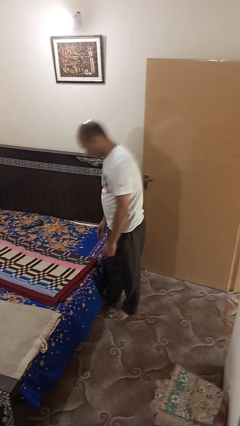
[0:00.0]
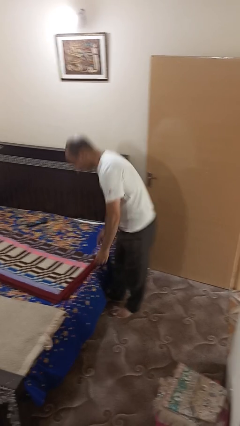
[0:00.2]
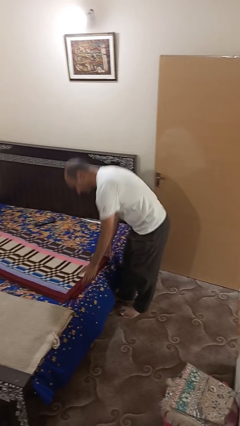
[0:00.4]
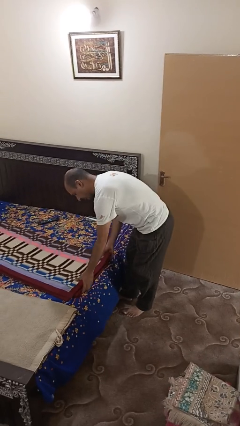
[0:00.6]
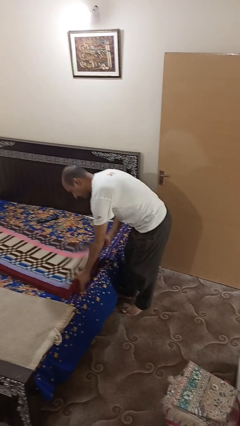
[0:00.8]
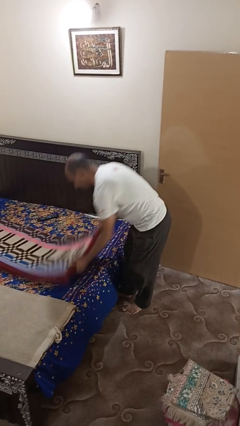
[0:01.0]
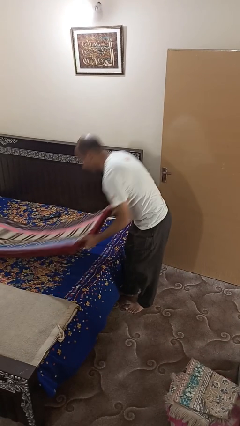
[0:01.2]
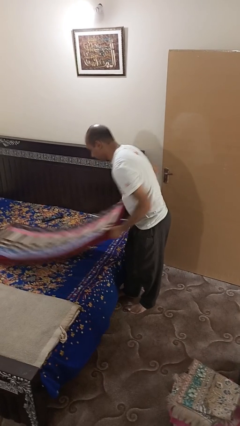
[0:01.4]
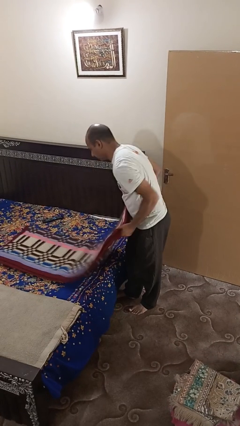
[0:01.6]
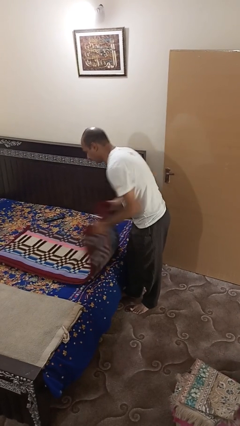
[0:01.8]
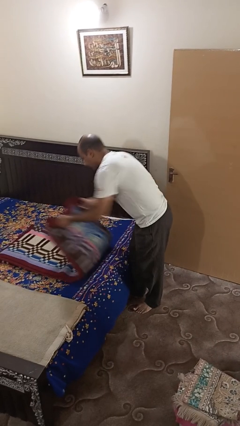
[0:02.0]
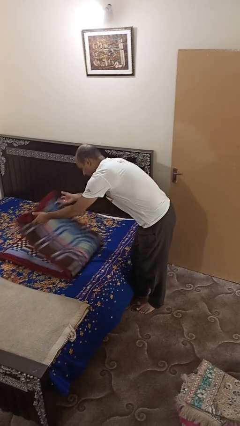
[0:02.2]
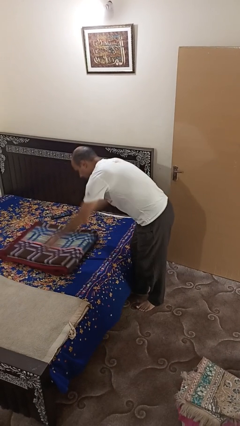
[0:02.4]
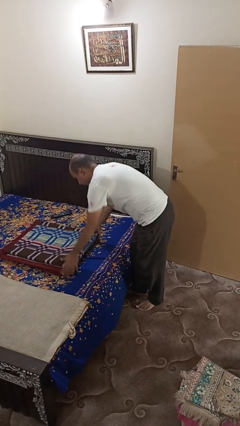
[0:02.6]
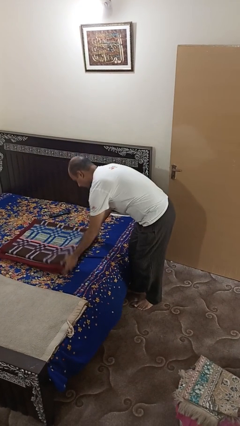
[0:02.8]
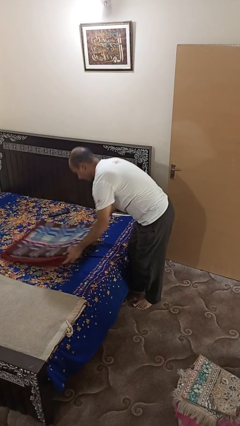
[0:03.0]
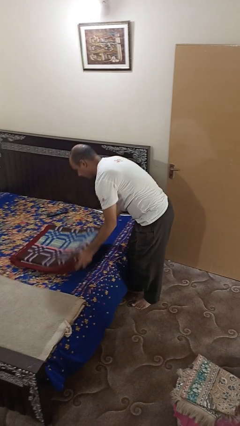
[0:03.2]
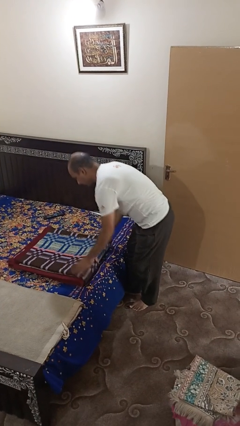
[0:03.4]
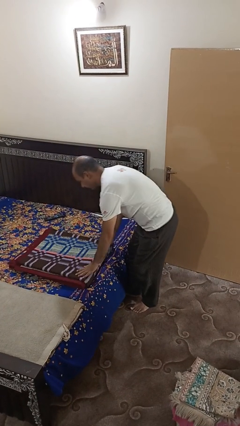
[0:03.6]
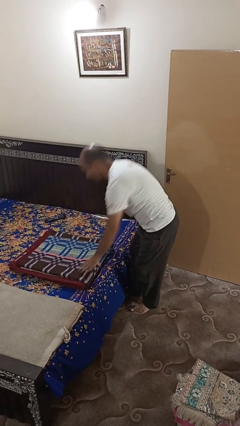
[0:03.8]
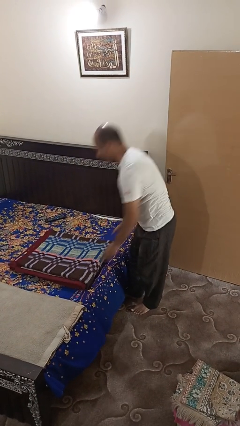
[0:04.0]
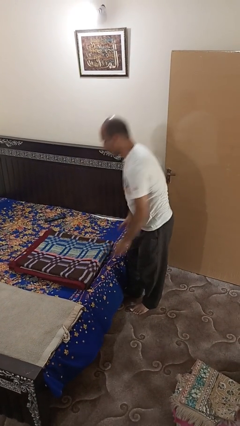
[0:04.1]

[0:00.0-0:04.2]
person folds blanket

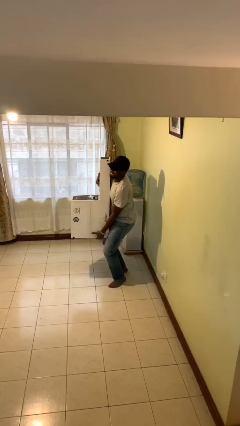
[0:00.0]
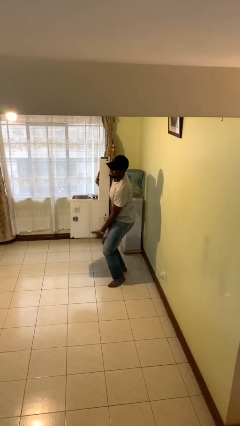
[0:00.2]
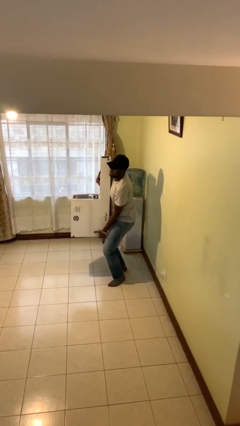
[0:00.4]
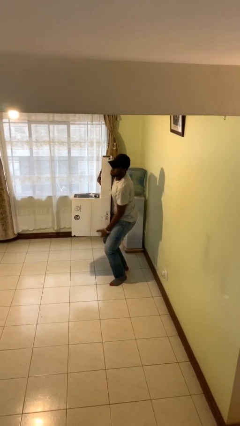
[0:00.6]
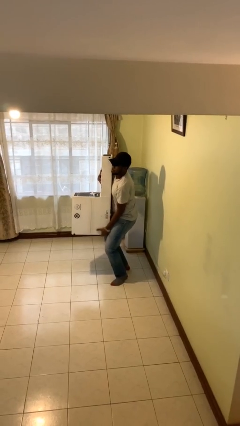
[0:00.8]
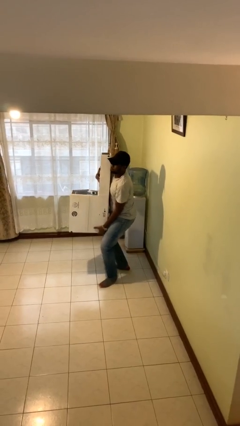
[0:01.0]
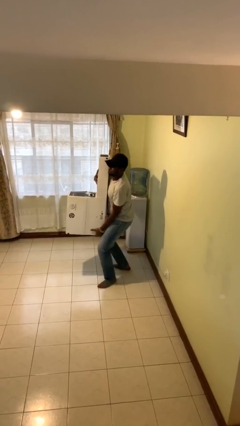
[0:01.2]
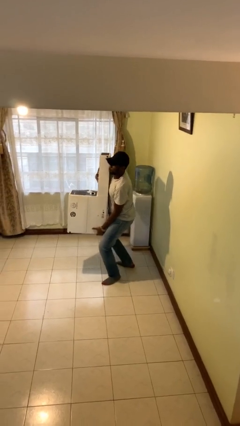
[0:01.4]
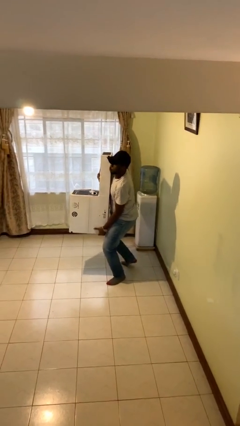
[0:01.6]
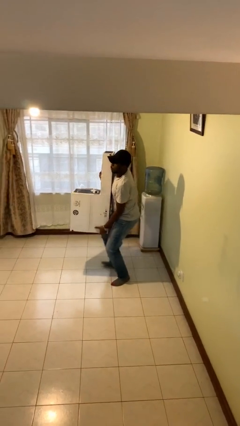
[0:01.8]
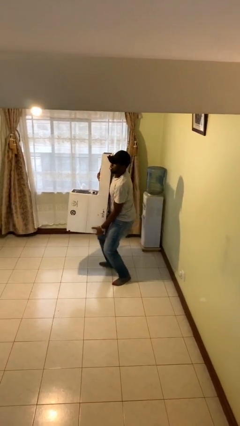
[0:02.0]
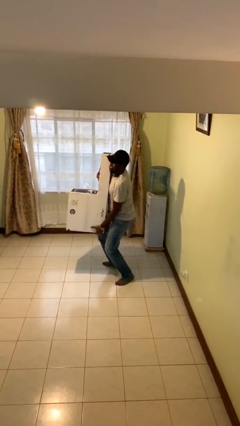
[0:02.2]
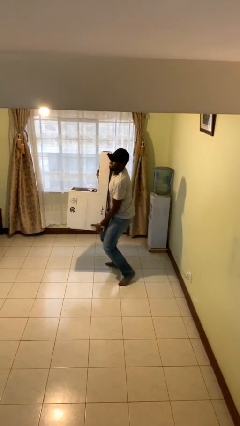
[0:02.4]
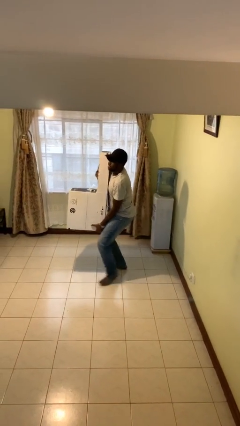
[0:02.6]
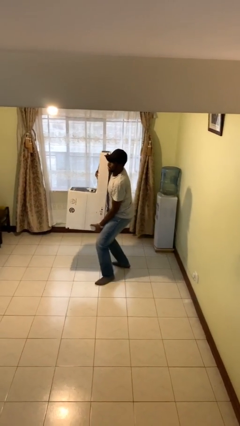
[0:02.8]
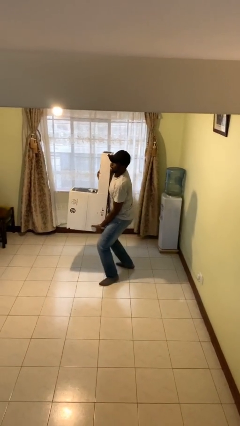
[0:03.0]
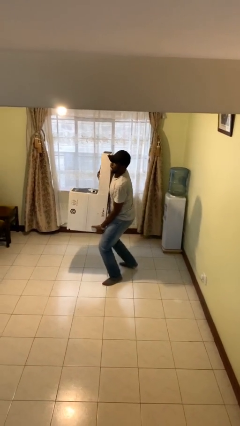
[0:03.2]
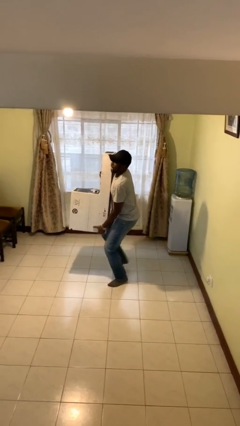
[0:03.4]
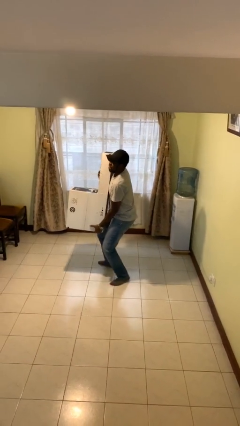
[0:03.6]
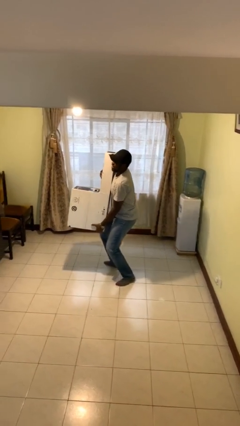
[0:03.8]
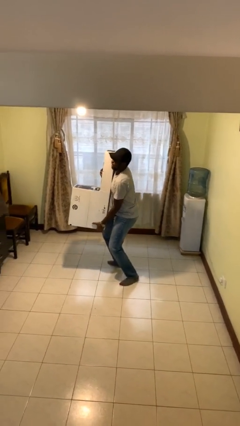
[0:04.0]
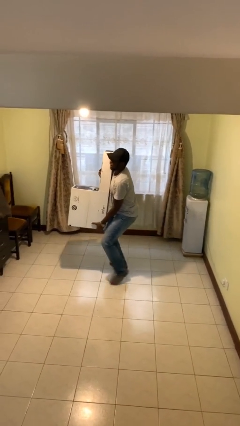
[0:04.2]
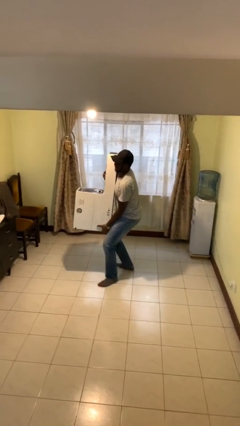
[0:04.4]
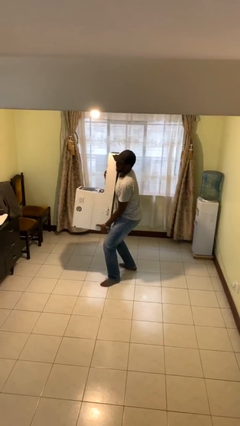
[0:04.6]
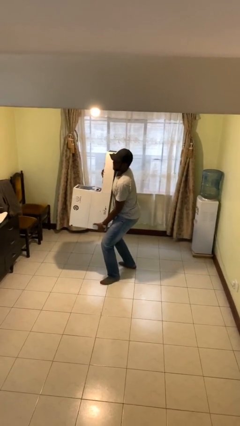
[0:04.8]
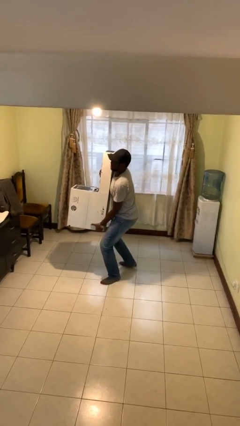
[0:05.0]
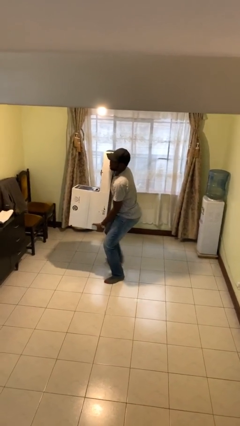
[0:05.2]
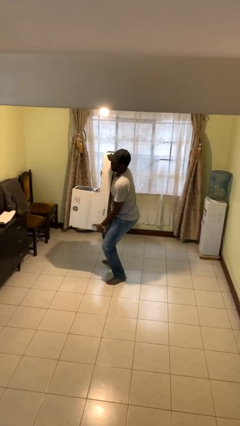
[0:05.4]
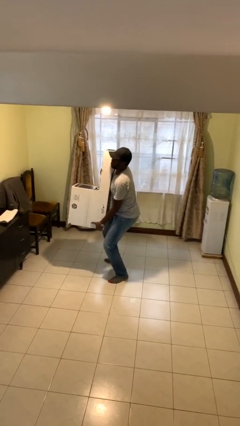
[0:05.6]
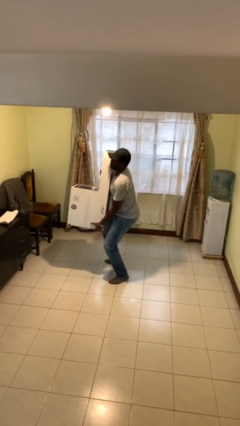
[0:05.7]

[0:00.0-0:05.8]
person carries heavy object

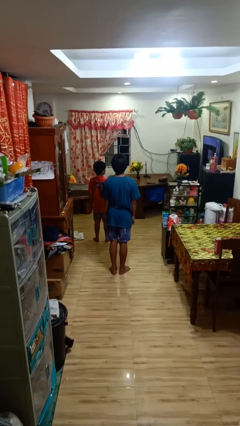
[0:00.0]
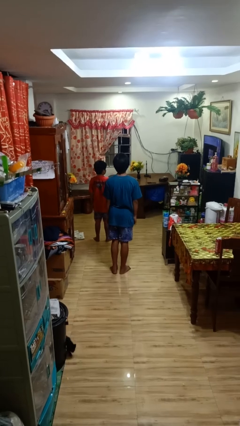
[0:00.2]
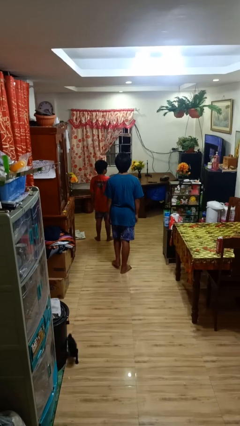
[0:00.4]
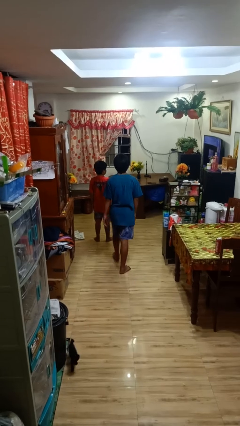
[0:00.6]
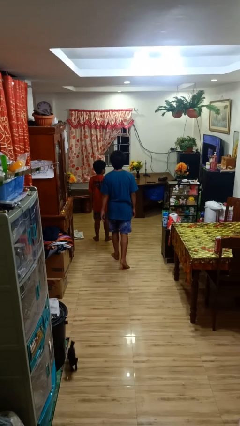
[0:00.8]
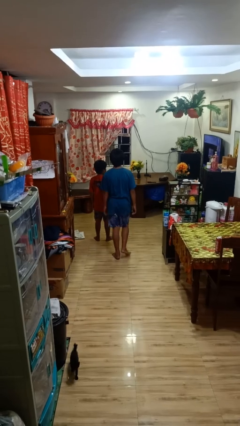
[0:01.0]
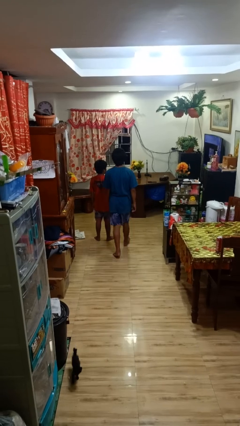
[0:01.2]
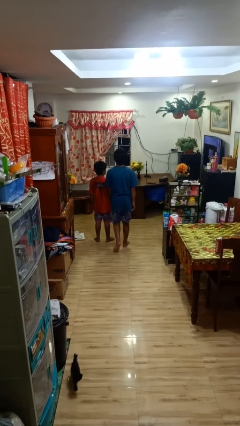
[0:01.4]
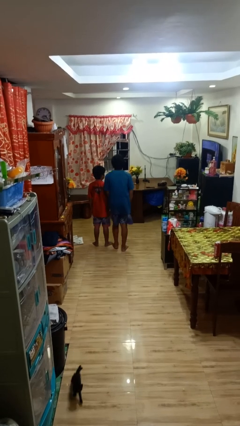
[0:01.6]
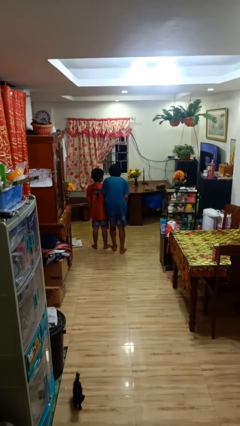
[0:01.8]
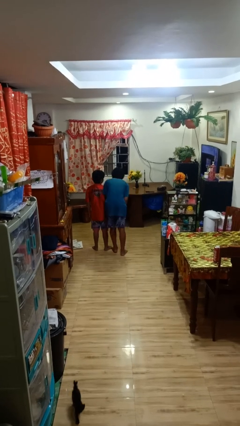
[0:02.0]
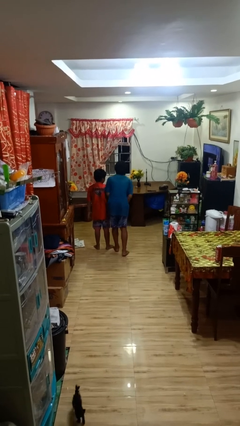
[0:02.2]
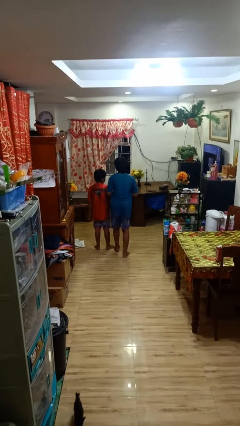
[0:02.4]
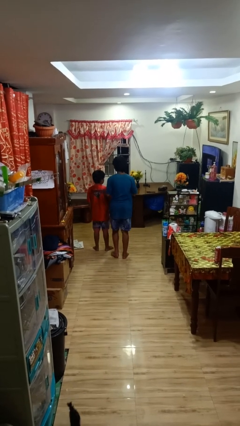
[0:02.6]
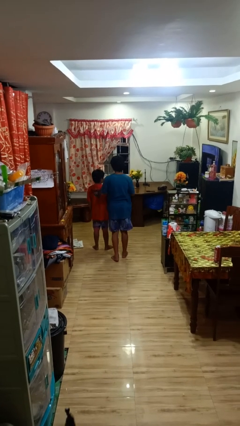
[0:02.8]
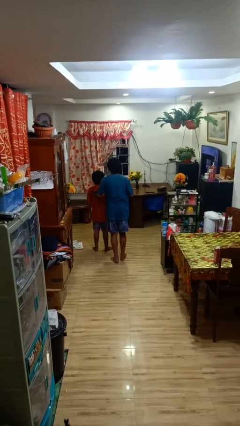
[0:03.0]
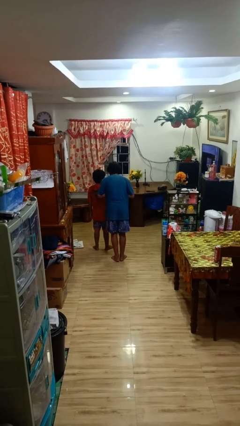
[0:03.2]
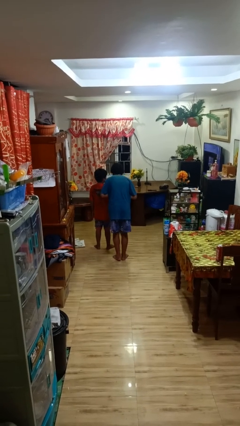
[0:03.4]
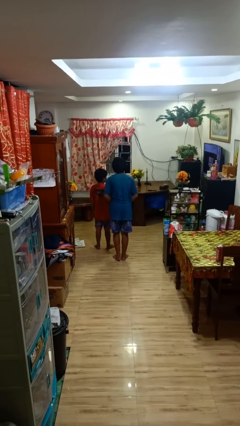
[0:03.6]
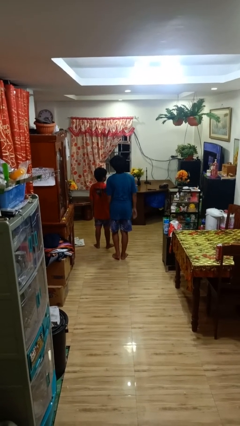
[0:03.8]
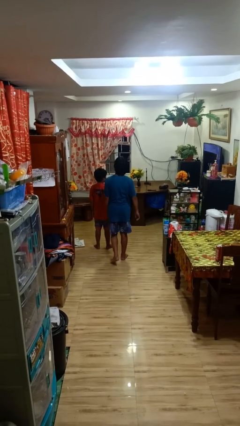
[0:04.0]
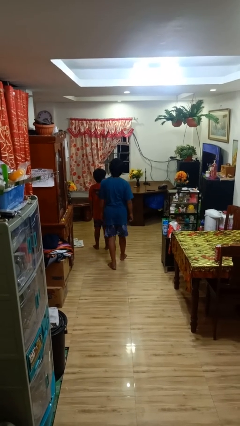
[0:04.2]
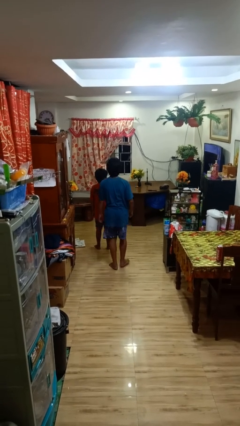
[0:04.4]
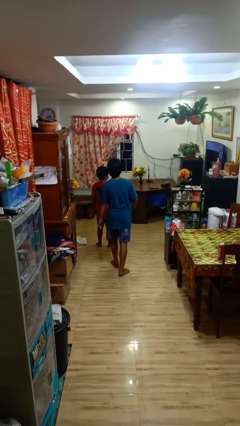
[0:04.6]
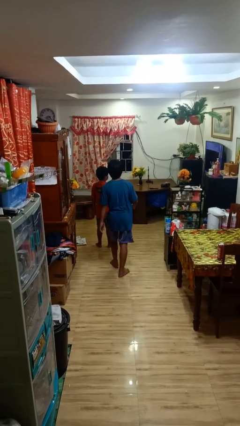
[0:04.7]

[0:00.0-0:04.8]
person bumps into person

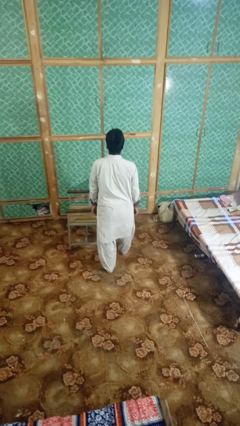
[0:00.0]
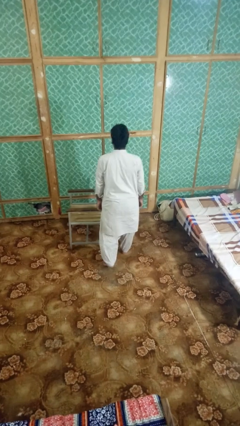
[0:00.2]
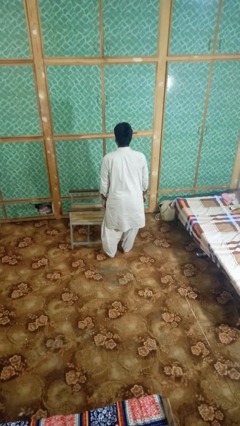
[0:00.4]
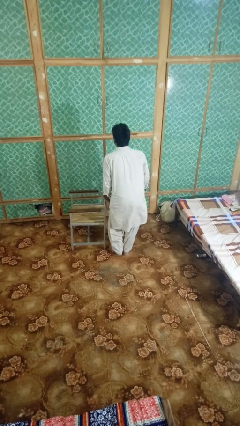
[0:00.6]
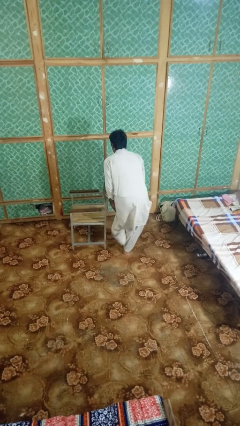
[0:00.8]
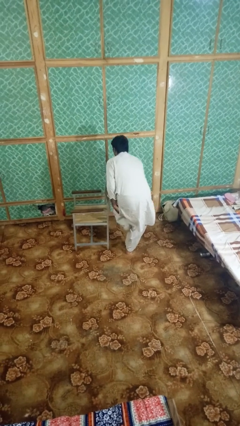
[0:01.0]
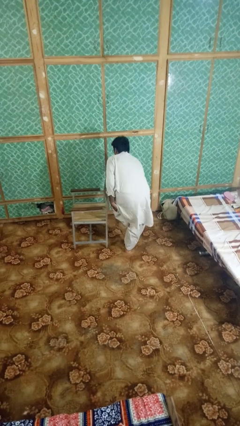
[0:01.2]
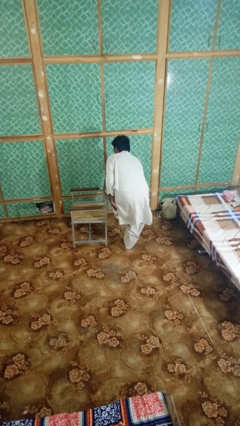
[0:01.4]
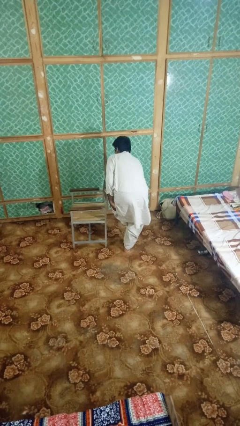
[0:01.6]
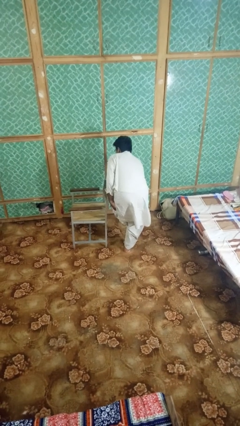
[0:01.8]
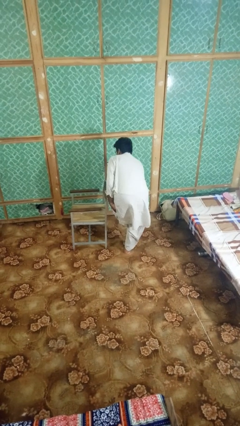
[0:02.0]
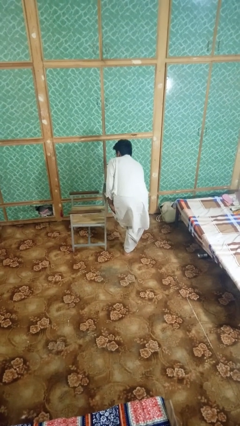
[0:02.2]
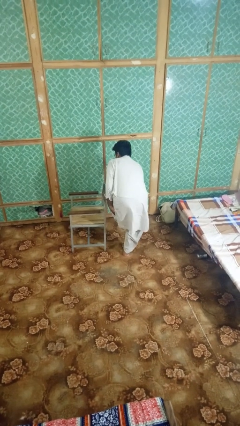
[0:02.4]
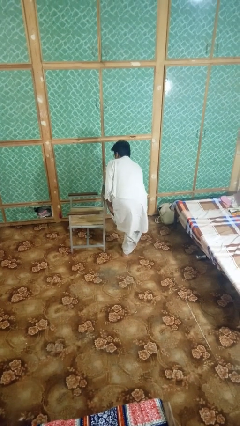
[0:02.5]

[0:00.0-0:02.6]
person stubs toe

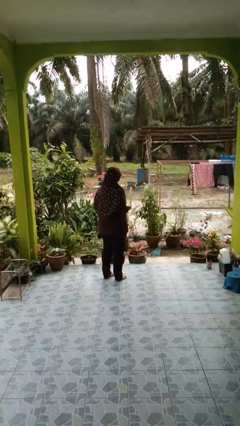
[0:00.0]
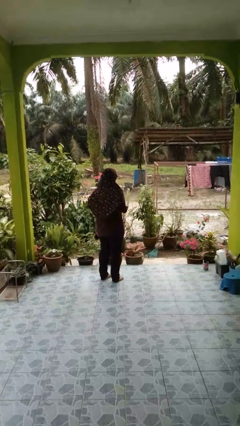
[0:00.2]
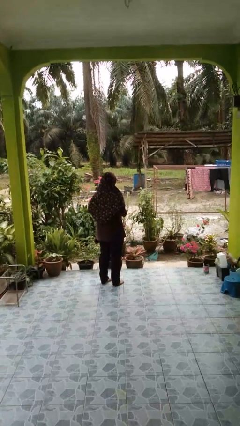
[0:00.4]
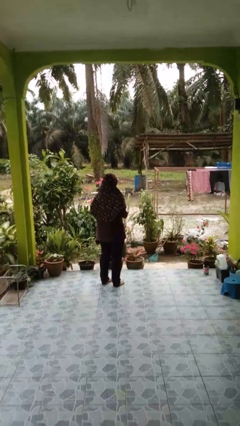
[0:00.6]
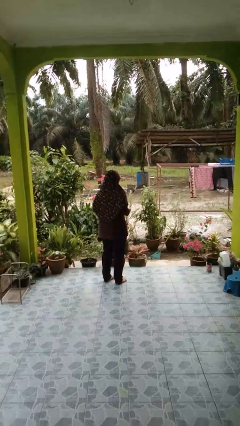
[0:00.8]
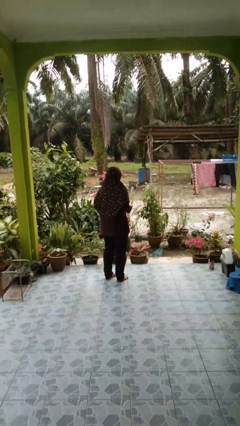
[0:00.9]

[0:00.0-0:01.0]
person punches
